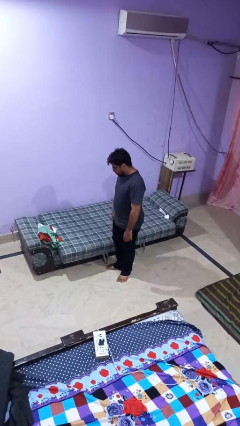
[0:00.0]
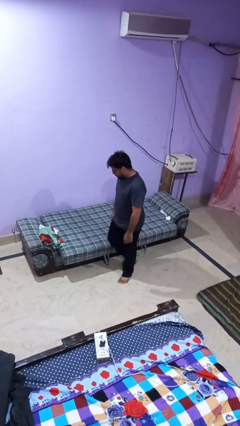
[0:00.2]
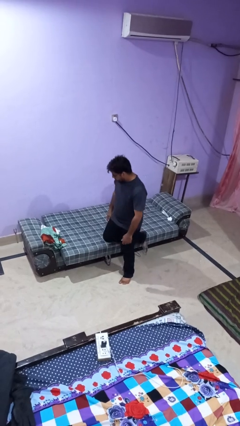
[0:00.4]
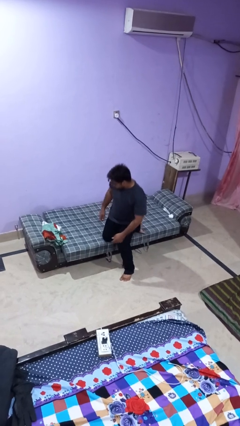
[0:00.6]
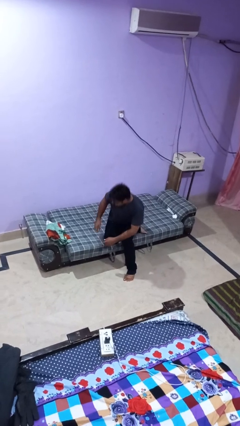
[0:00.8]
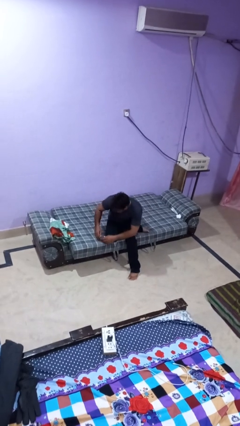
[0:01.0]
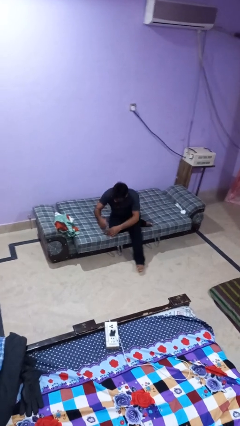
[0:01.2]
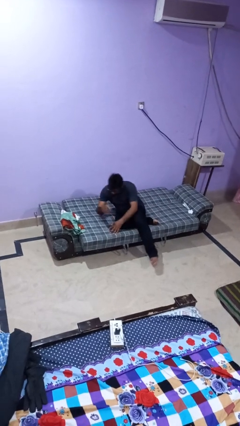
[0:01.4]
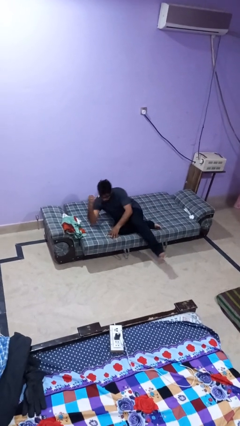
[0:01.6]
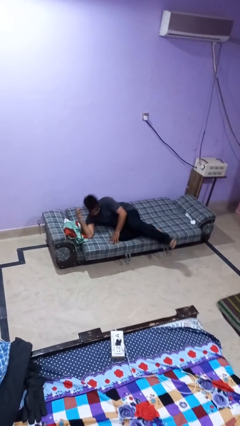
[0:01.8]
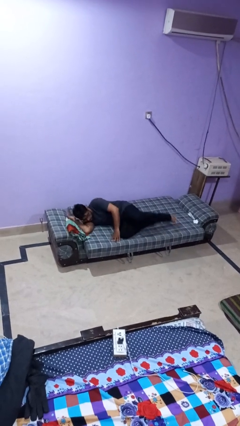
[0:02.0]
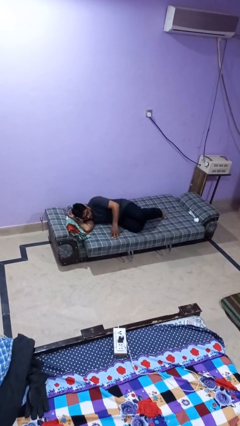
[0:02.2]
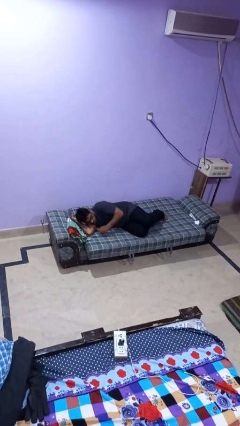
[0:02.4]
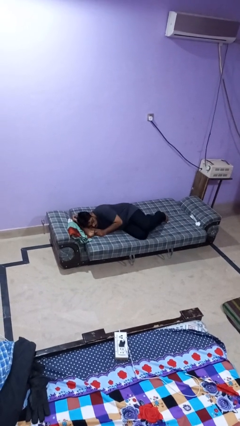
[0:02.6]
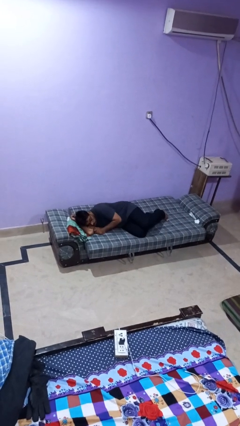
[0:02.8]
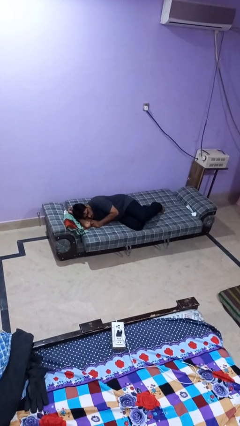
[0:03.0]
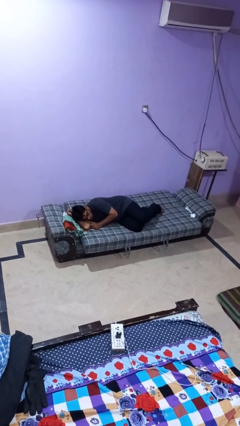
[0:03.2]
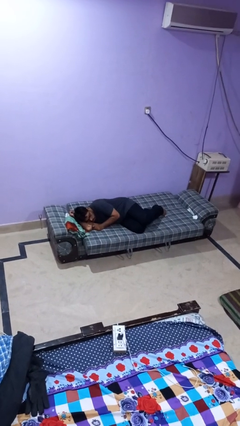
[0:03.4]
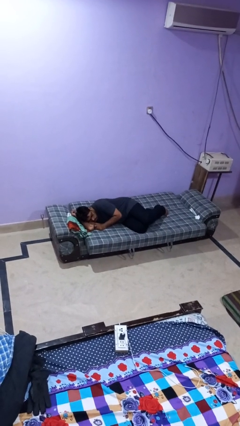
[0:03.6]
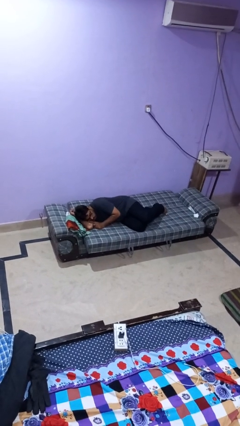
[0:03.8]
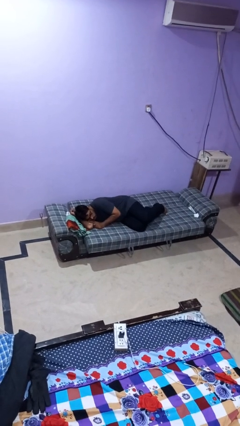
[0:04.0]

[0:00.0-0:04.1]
person lies down on bed

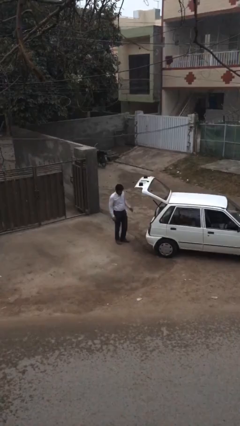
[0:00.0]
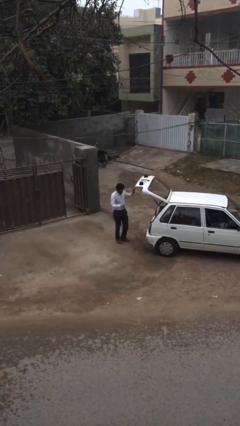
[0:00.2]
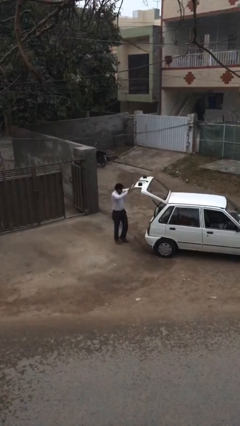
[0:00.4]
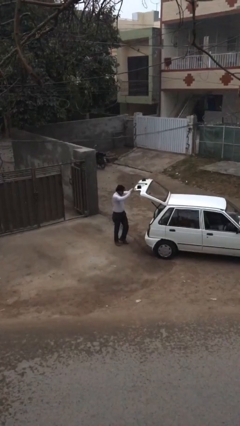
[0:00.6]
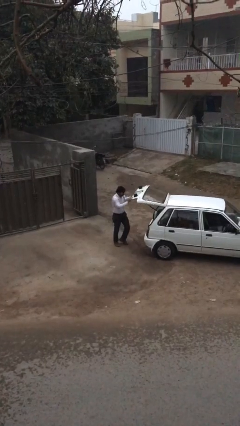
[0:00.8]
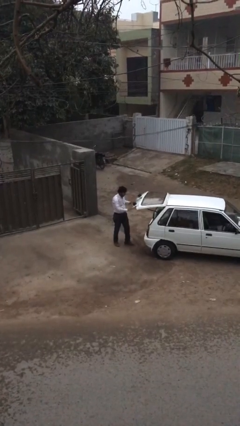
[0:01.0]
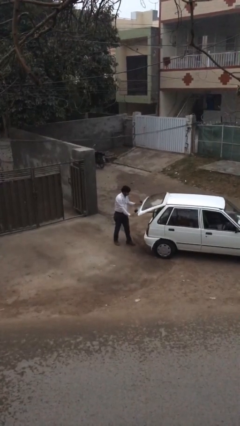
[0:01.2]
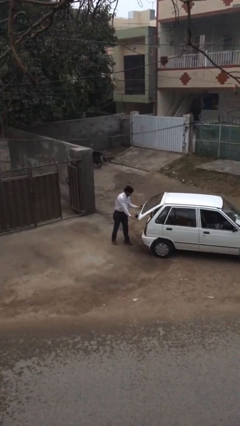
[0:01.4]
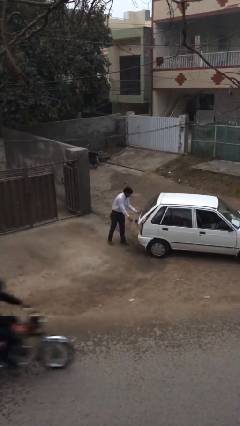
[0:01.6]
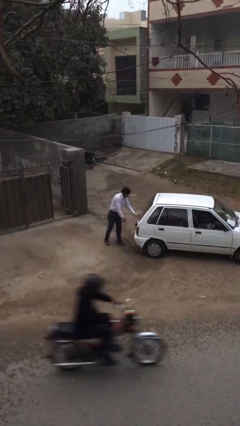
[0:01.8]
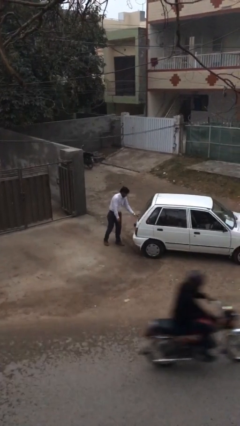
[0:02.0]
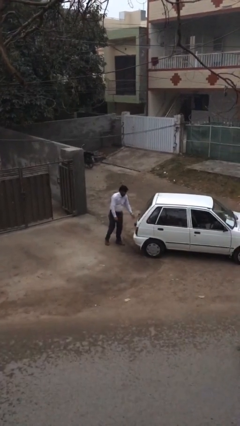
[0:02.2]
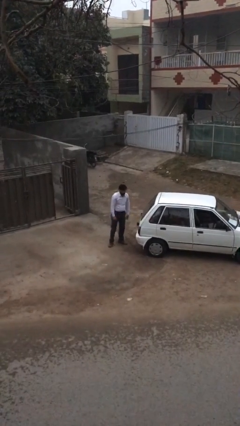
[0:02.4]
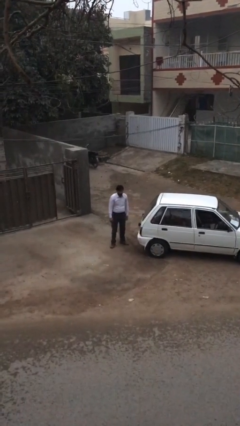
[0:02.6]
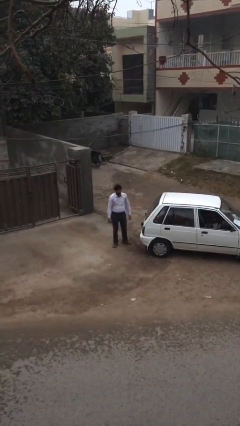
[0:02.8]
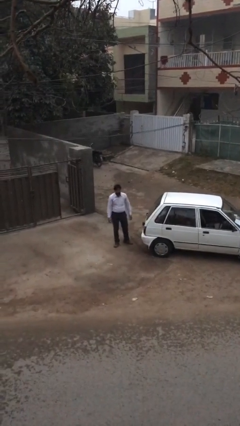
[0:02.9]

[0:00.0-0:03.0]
person closes car trunk

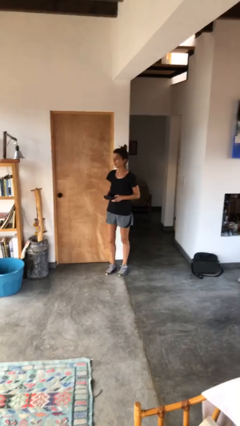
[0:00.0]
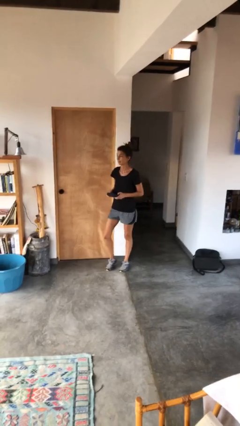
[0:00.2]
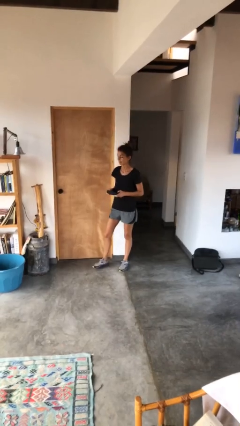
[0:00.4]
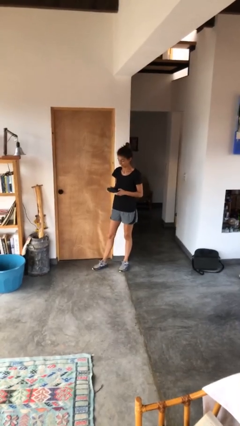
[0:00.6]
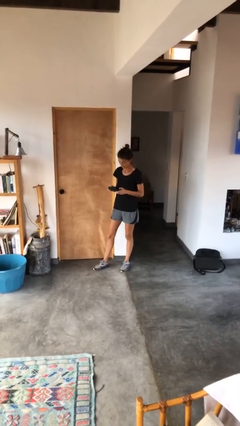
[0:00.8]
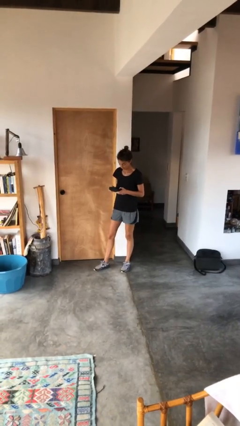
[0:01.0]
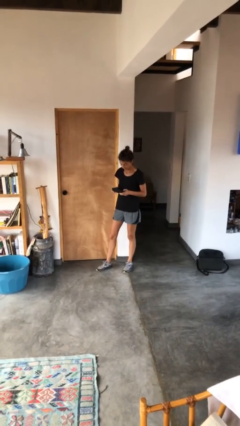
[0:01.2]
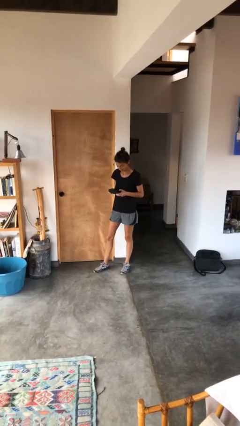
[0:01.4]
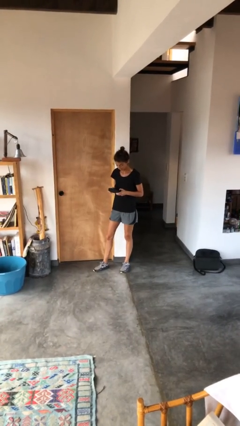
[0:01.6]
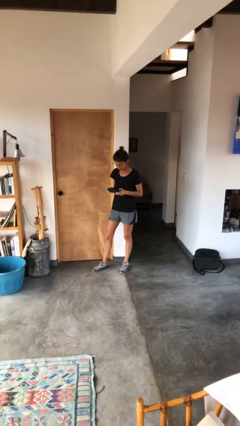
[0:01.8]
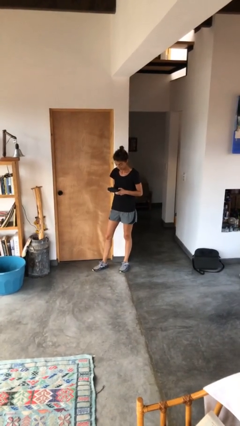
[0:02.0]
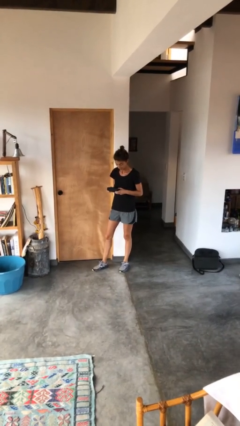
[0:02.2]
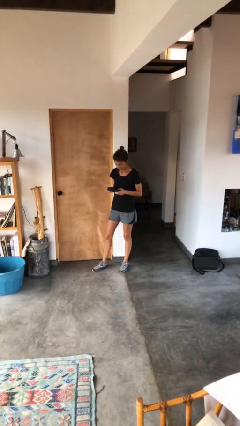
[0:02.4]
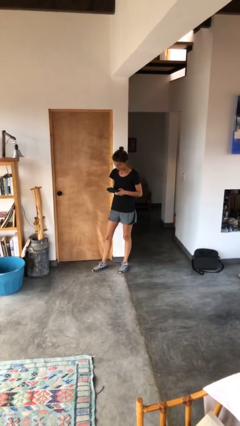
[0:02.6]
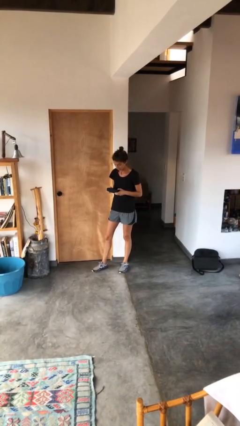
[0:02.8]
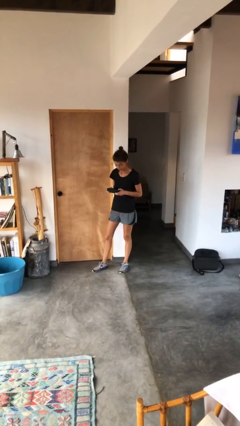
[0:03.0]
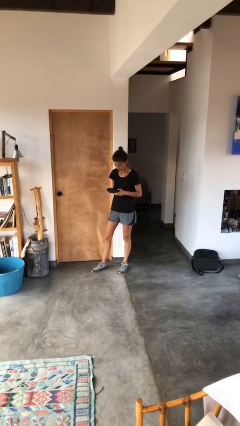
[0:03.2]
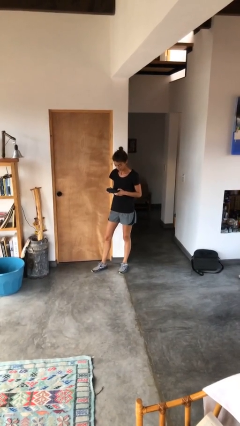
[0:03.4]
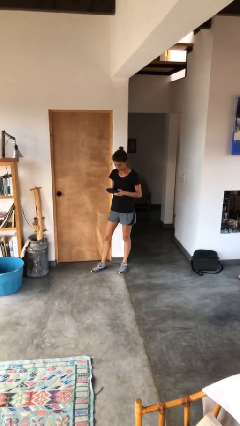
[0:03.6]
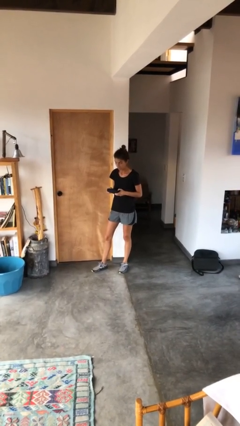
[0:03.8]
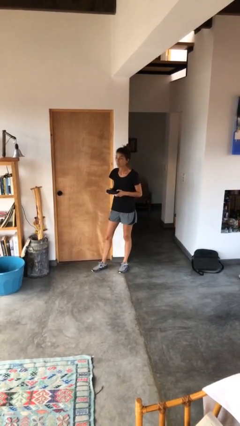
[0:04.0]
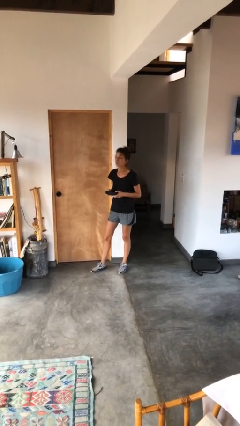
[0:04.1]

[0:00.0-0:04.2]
person interacts with handheld game

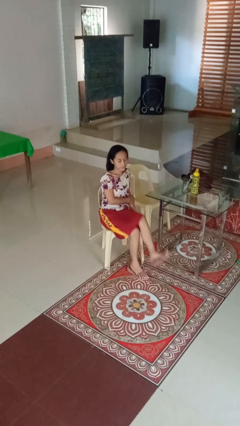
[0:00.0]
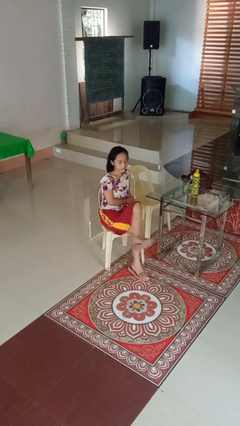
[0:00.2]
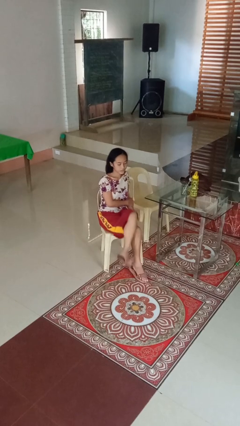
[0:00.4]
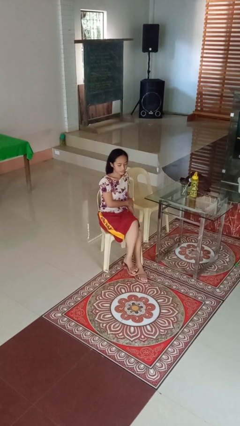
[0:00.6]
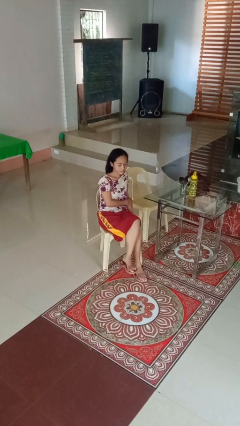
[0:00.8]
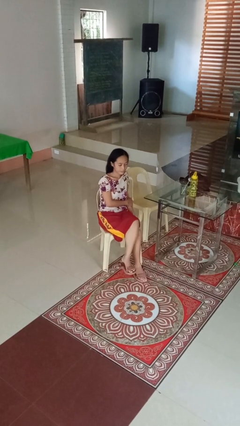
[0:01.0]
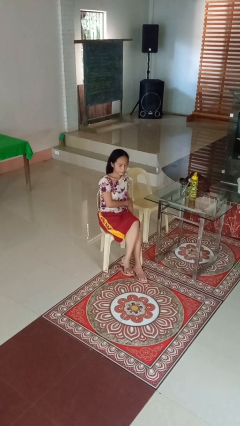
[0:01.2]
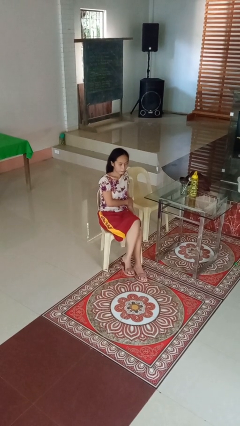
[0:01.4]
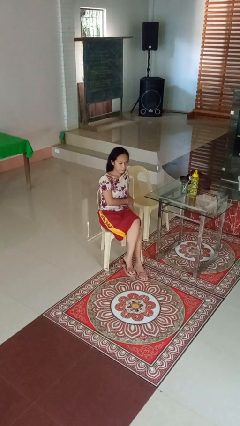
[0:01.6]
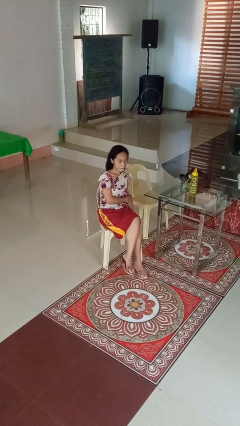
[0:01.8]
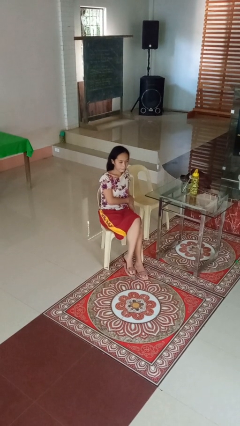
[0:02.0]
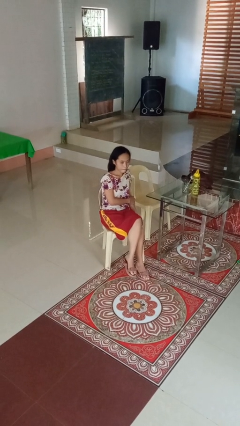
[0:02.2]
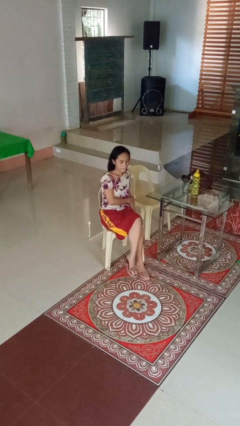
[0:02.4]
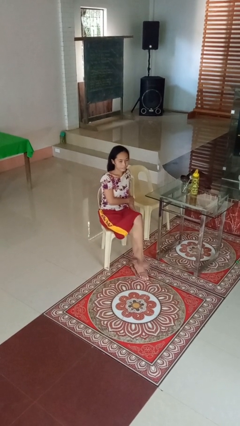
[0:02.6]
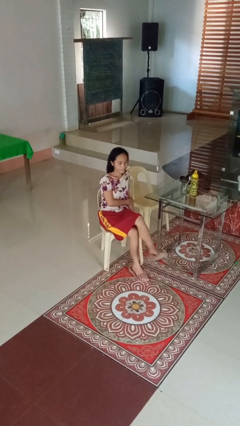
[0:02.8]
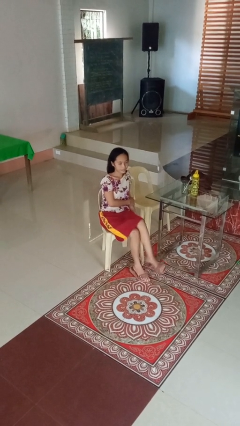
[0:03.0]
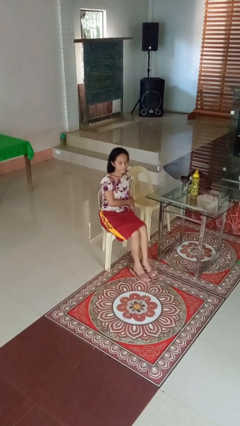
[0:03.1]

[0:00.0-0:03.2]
person crosses legs

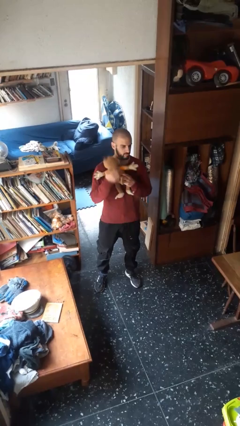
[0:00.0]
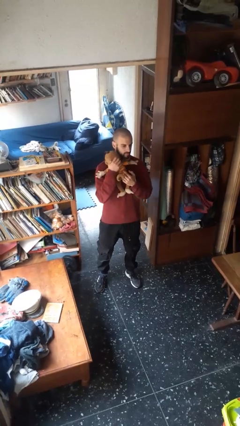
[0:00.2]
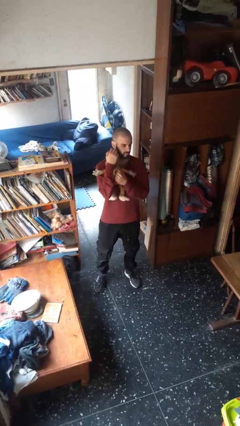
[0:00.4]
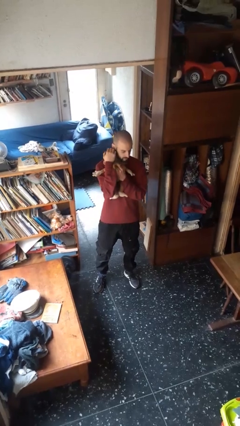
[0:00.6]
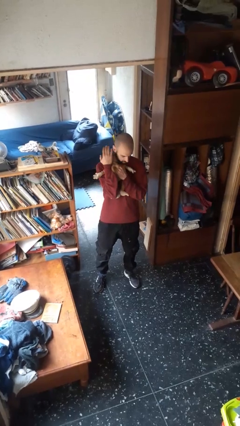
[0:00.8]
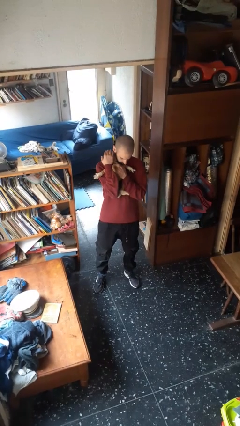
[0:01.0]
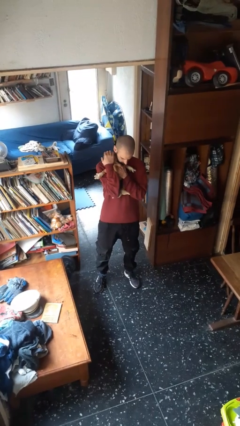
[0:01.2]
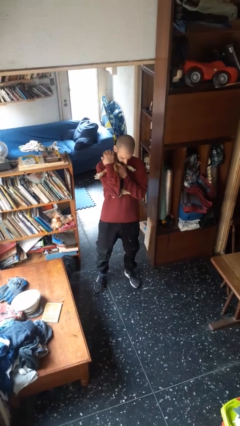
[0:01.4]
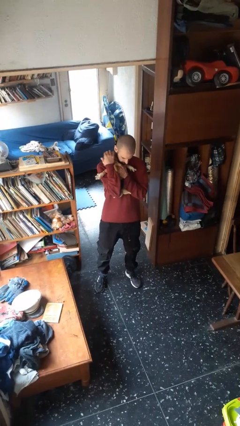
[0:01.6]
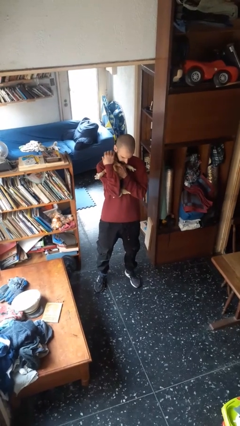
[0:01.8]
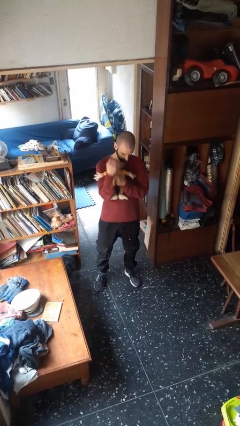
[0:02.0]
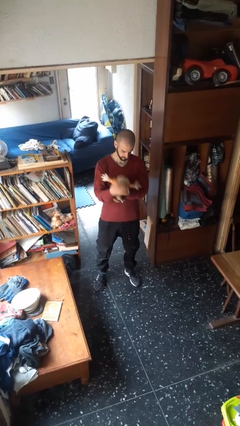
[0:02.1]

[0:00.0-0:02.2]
person hugs stuffed animal

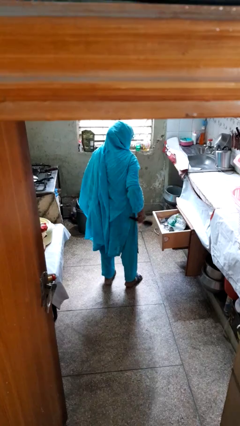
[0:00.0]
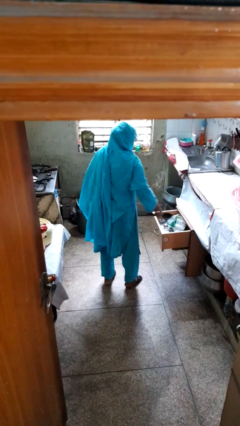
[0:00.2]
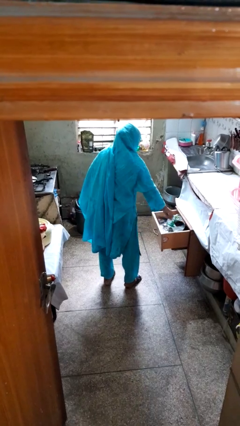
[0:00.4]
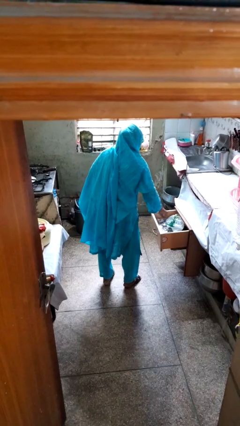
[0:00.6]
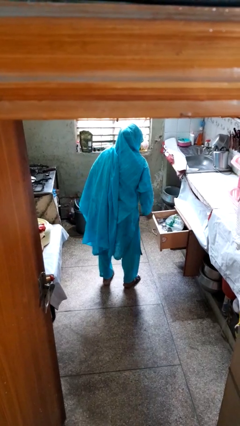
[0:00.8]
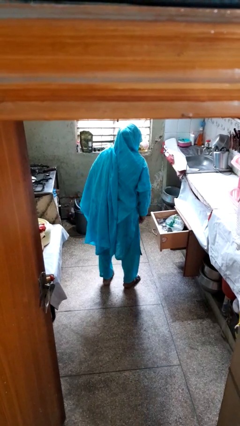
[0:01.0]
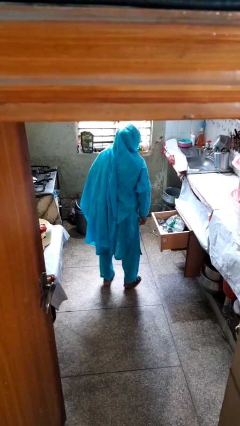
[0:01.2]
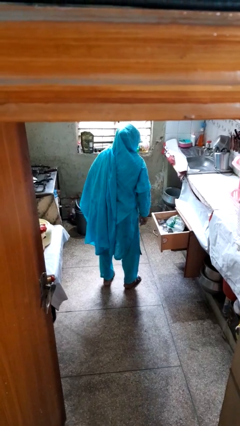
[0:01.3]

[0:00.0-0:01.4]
person puts object into kitchen drawer
